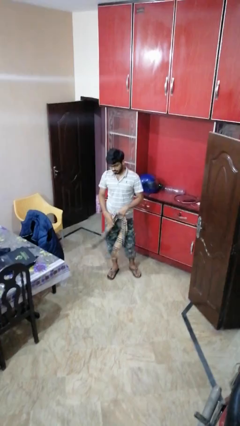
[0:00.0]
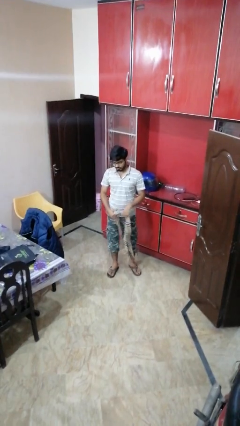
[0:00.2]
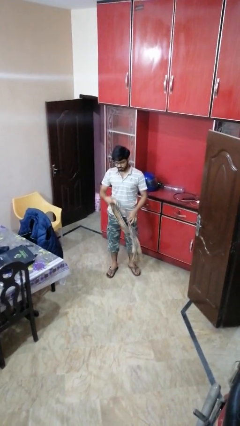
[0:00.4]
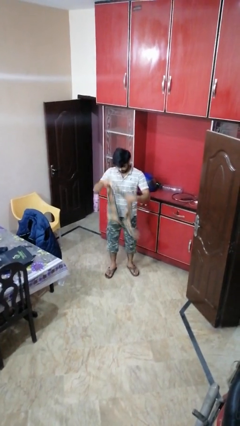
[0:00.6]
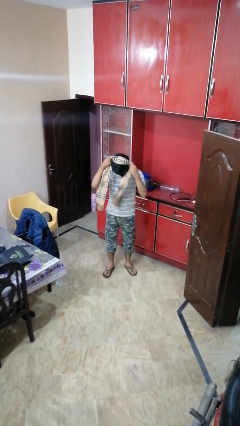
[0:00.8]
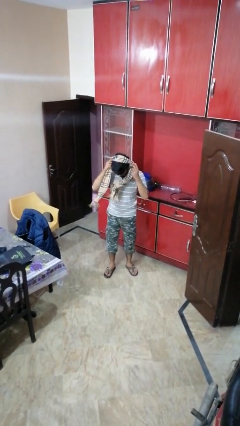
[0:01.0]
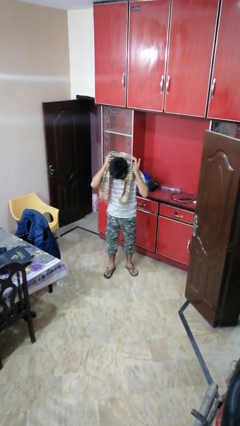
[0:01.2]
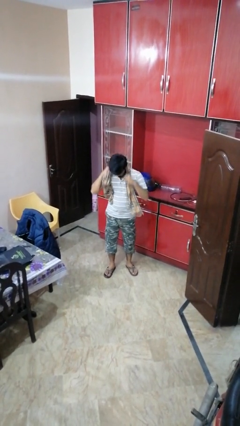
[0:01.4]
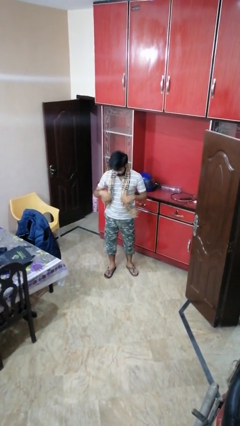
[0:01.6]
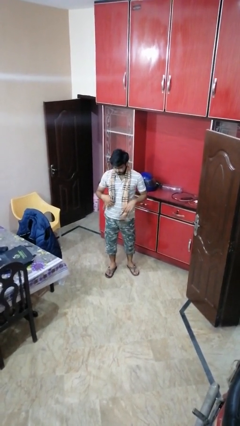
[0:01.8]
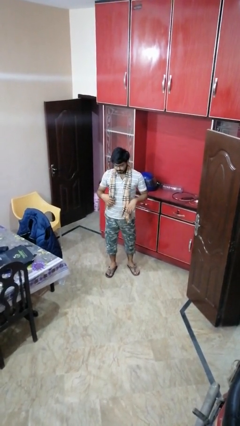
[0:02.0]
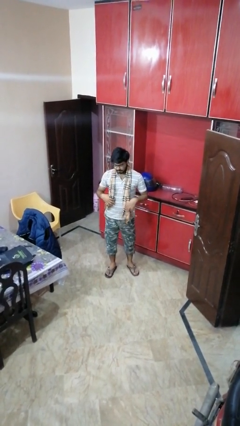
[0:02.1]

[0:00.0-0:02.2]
person puts on scarf

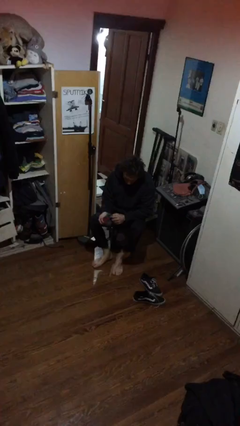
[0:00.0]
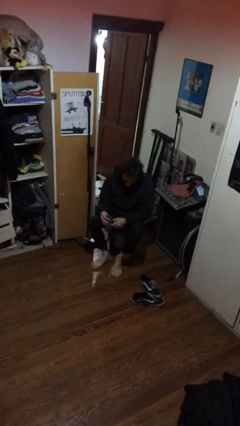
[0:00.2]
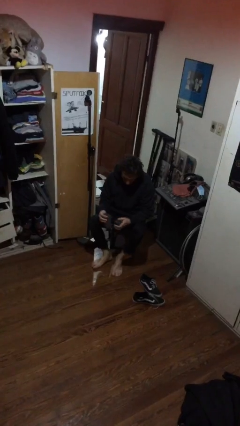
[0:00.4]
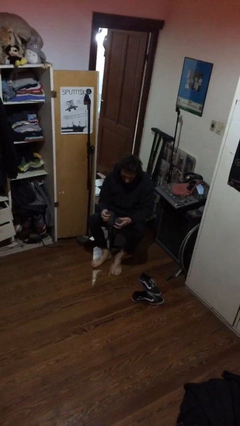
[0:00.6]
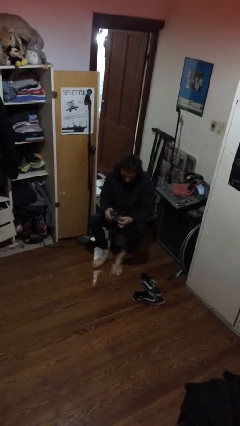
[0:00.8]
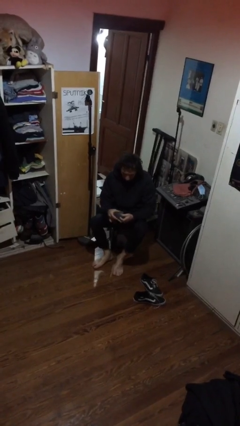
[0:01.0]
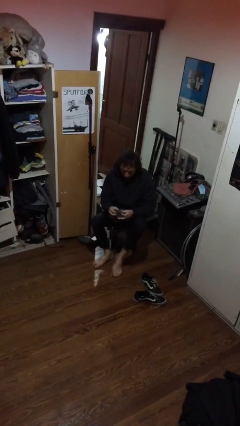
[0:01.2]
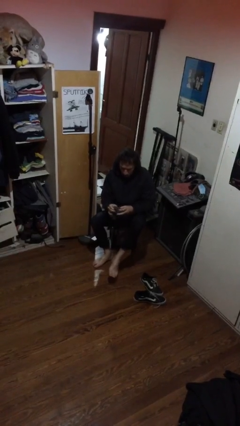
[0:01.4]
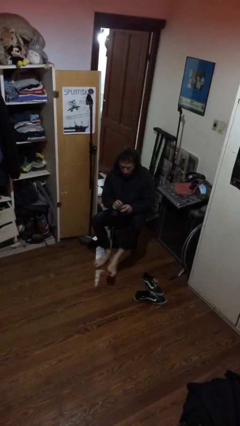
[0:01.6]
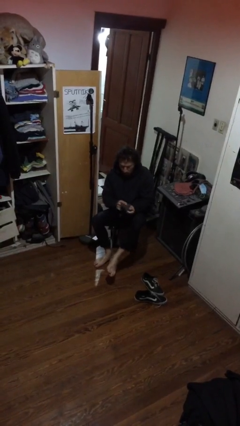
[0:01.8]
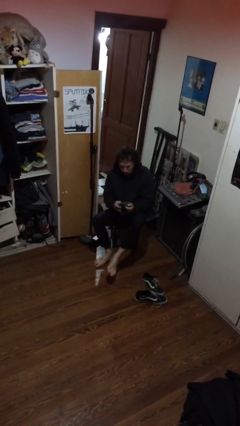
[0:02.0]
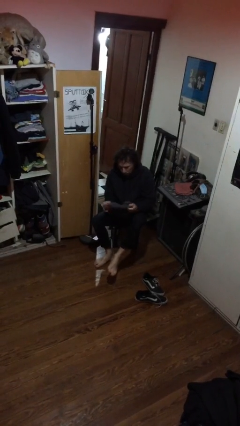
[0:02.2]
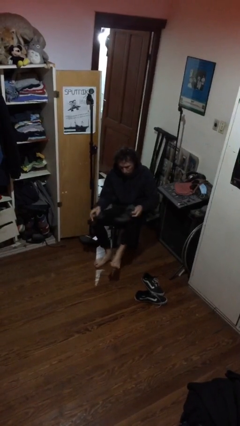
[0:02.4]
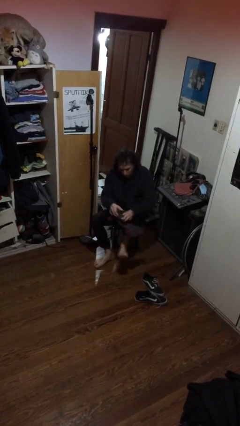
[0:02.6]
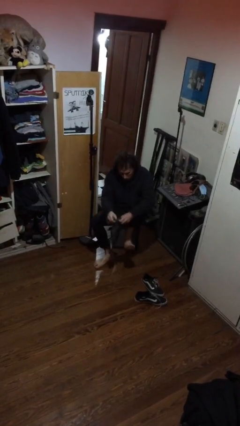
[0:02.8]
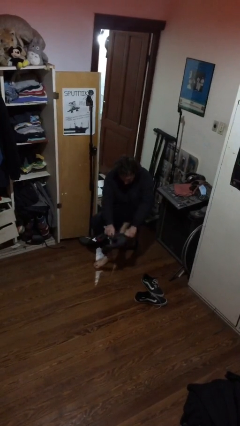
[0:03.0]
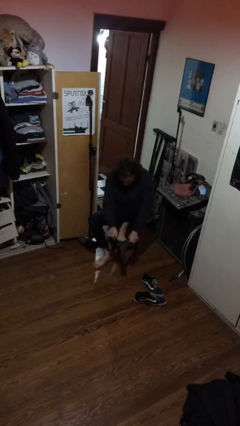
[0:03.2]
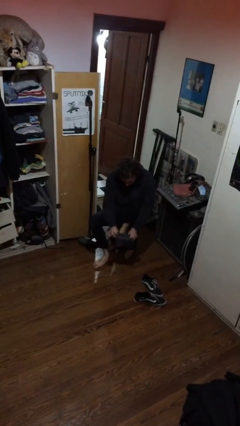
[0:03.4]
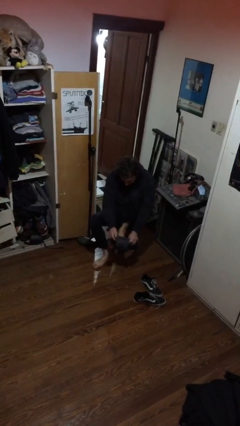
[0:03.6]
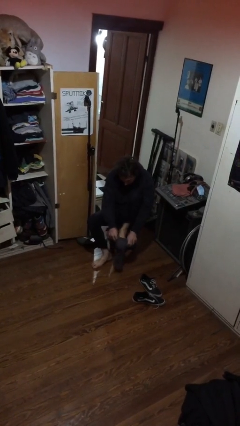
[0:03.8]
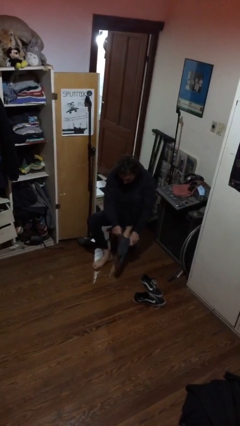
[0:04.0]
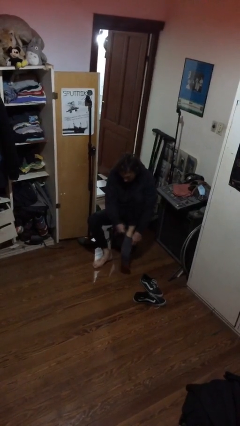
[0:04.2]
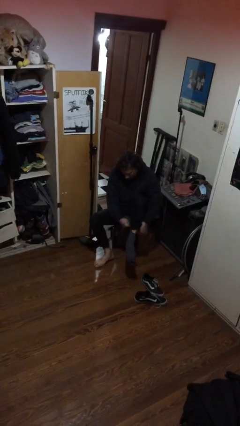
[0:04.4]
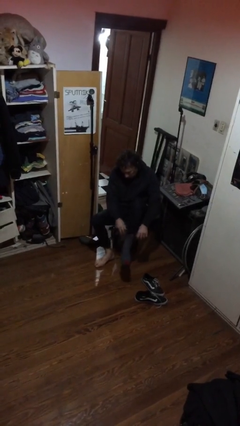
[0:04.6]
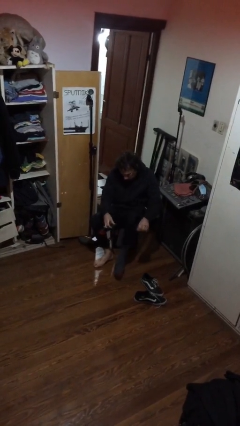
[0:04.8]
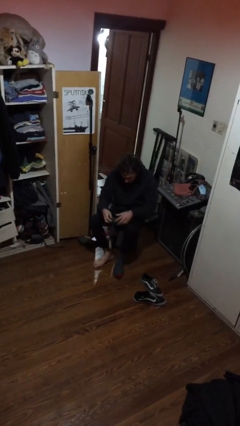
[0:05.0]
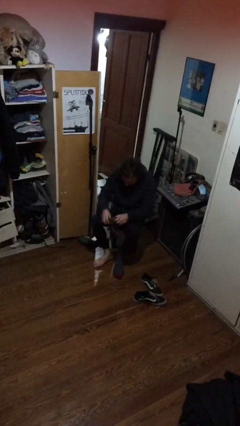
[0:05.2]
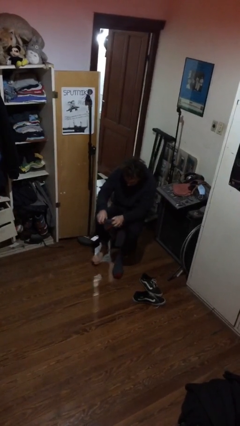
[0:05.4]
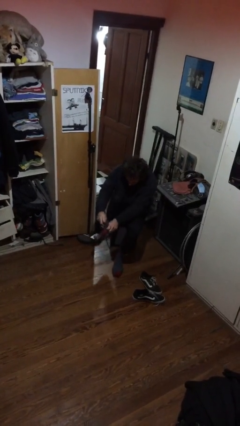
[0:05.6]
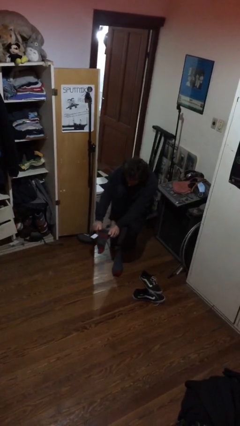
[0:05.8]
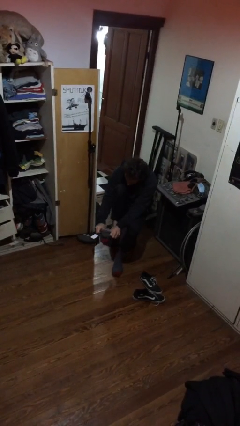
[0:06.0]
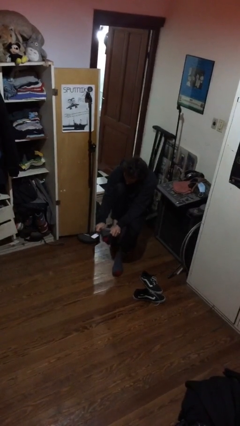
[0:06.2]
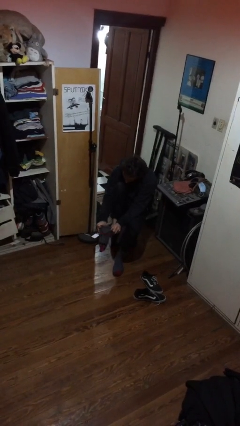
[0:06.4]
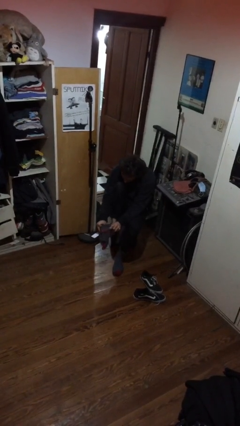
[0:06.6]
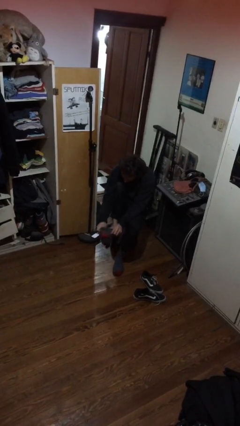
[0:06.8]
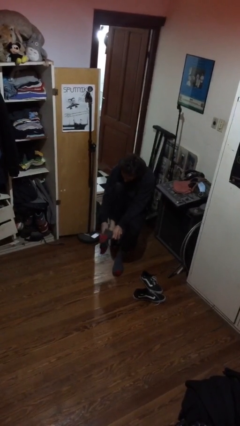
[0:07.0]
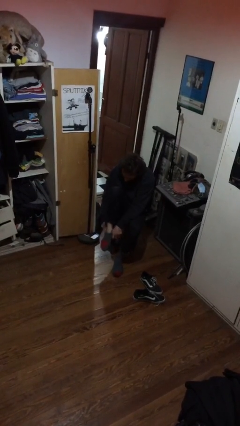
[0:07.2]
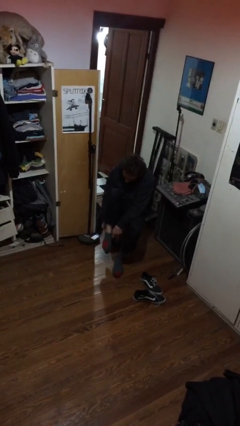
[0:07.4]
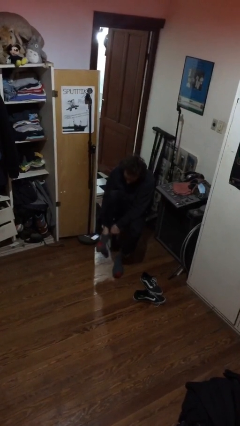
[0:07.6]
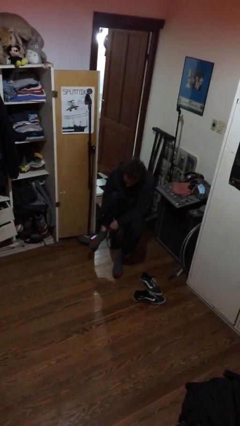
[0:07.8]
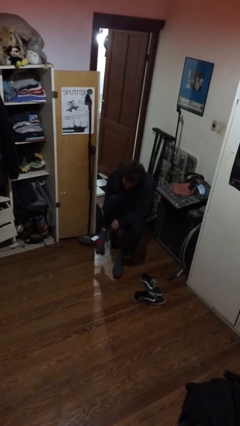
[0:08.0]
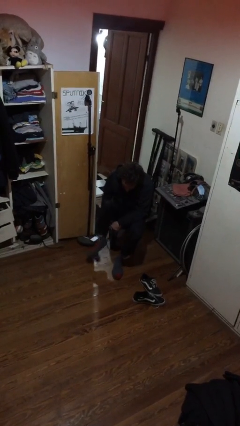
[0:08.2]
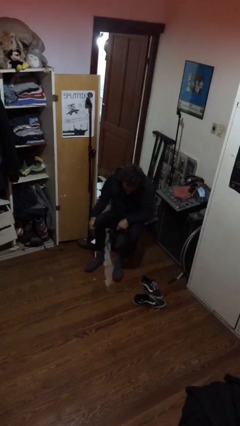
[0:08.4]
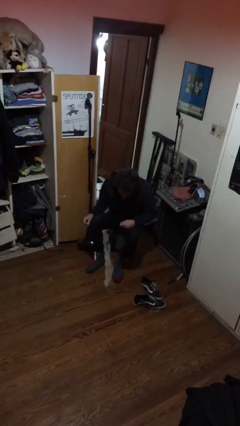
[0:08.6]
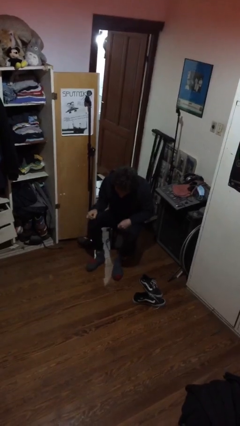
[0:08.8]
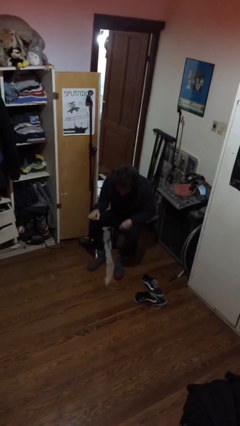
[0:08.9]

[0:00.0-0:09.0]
person puts on socks

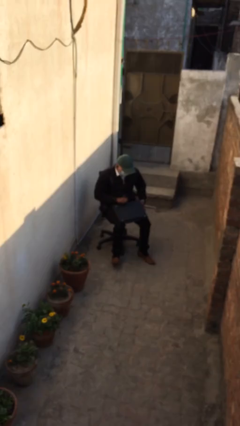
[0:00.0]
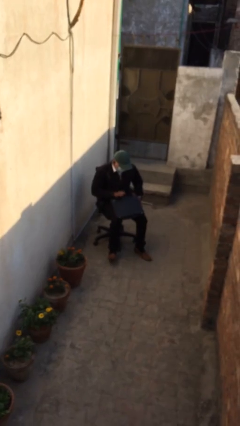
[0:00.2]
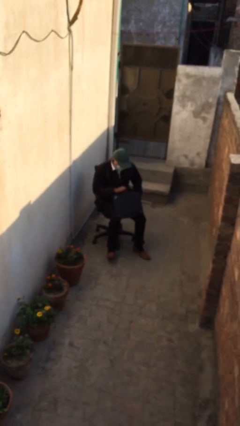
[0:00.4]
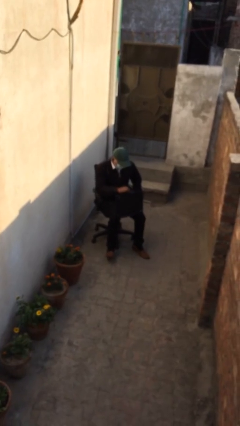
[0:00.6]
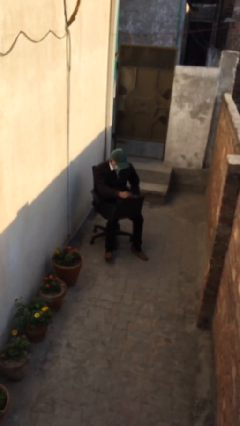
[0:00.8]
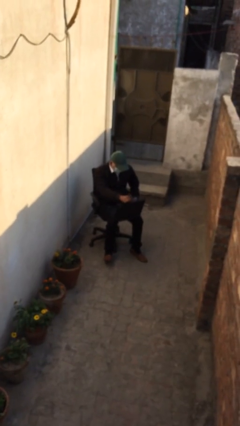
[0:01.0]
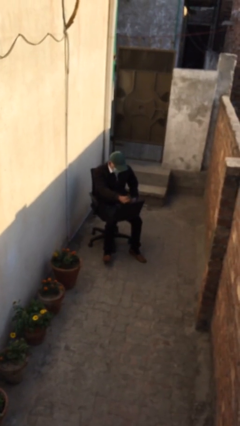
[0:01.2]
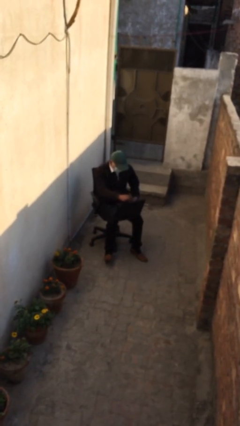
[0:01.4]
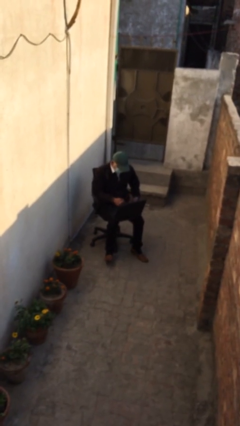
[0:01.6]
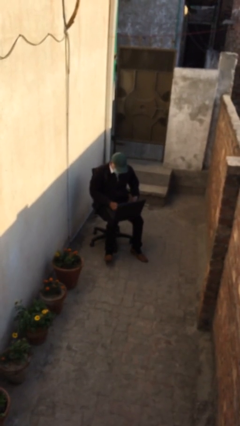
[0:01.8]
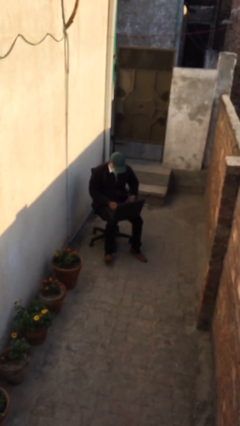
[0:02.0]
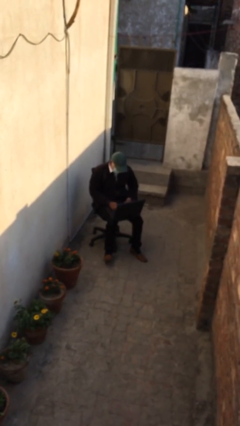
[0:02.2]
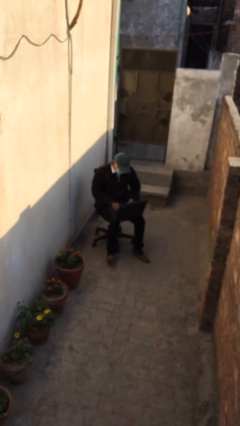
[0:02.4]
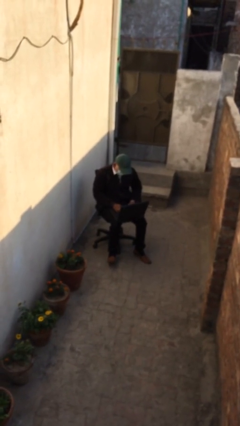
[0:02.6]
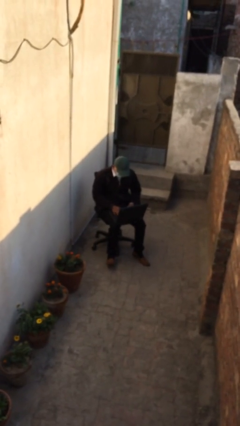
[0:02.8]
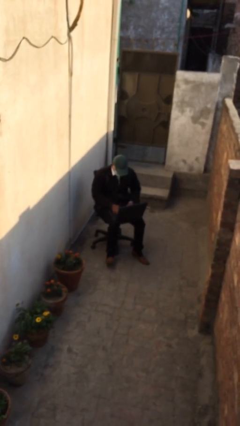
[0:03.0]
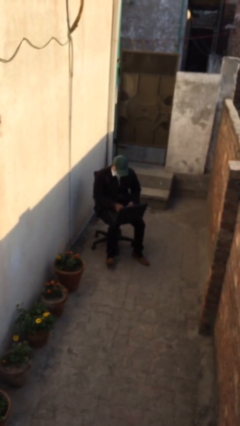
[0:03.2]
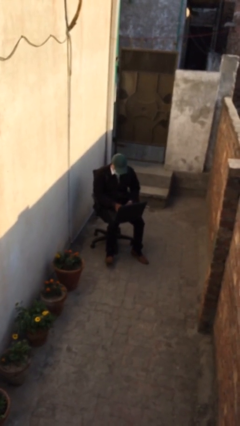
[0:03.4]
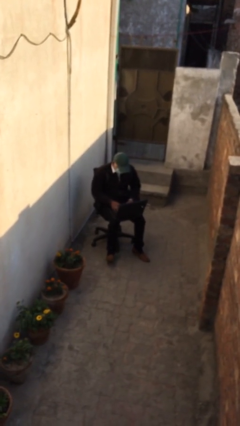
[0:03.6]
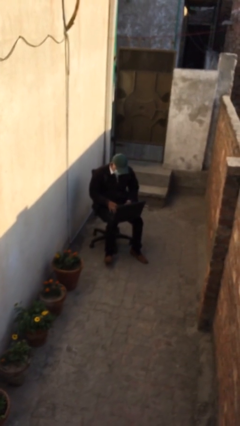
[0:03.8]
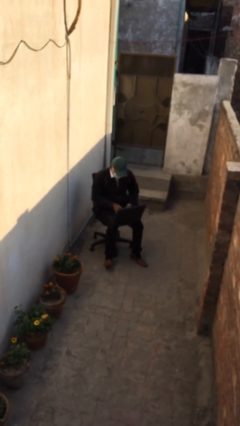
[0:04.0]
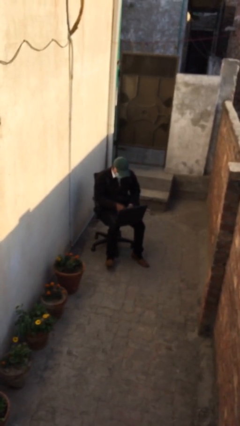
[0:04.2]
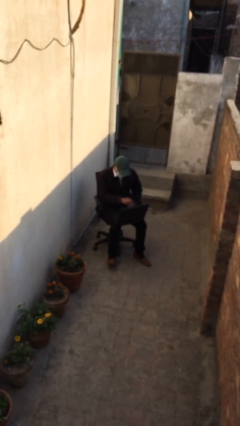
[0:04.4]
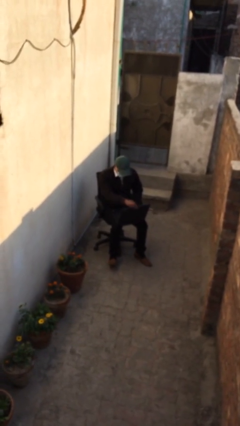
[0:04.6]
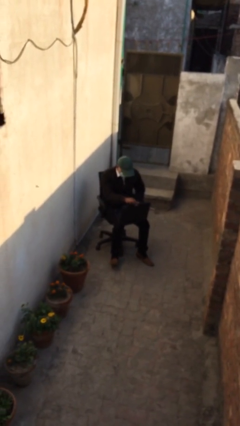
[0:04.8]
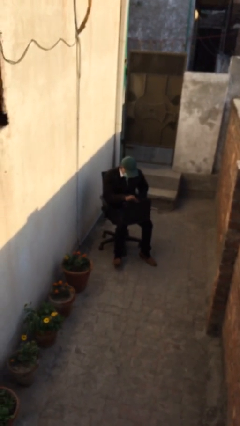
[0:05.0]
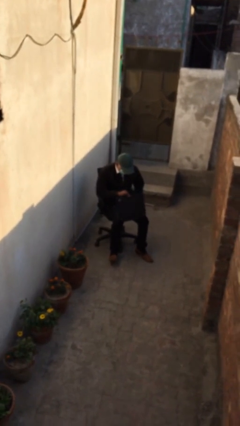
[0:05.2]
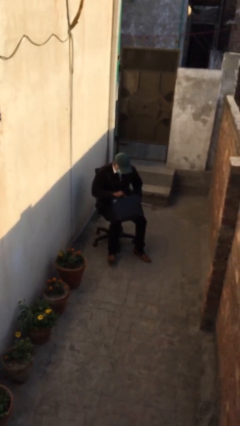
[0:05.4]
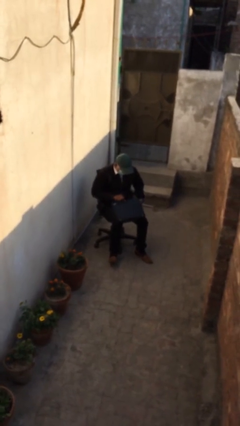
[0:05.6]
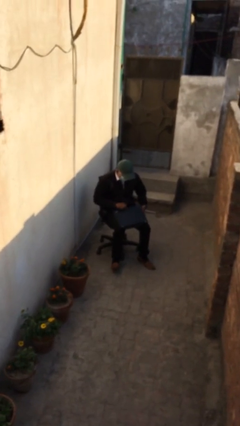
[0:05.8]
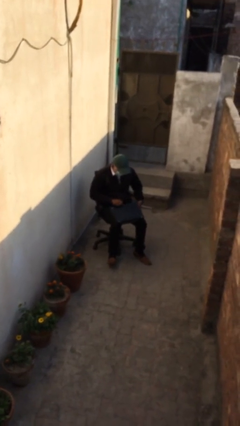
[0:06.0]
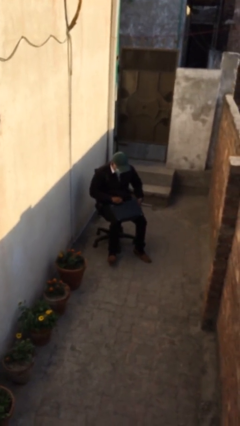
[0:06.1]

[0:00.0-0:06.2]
person interacts with laptop

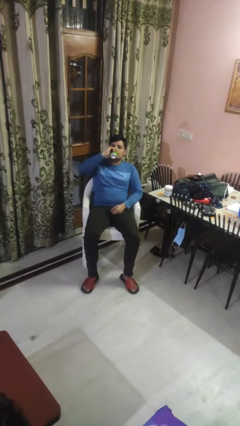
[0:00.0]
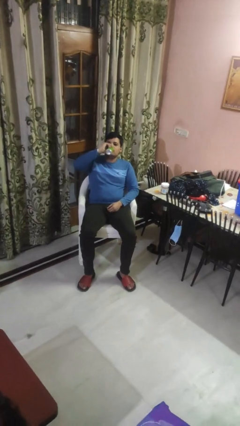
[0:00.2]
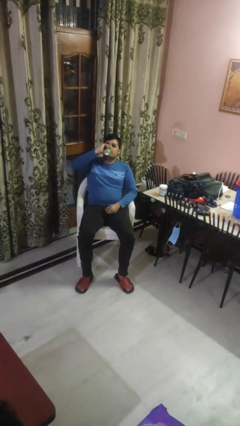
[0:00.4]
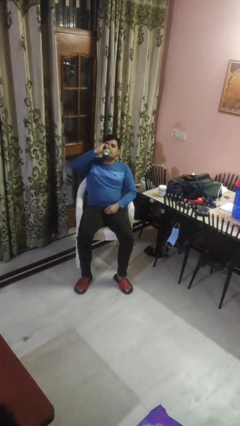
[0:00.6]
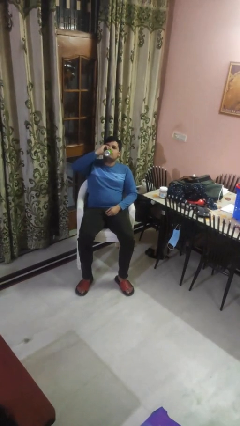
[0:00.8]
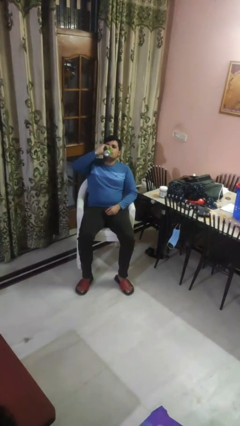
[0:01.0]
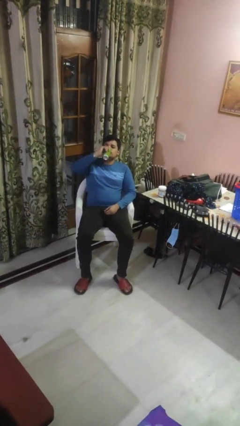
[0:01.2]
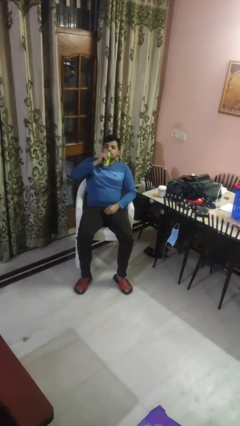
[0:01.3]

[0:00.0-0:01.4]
person drinks from beverage can
